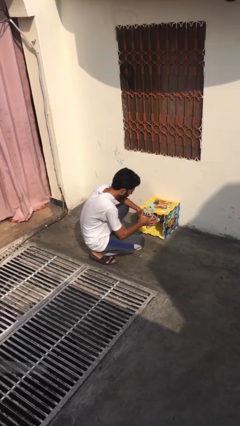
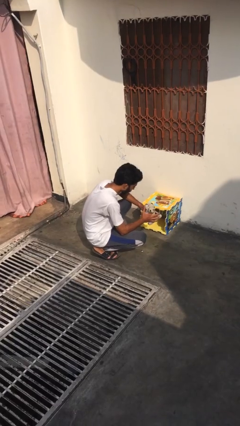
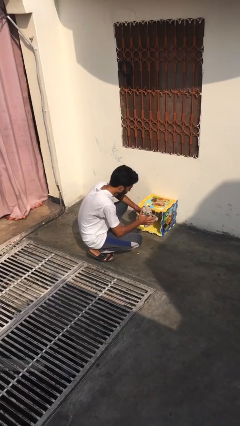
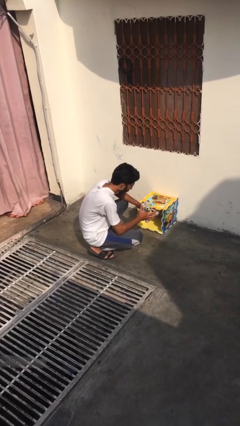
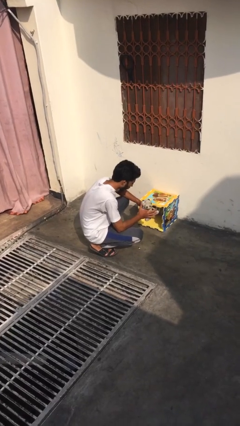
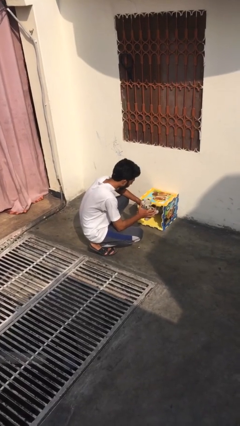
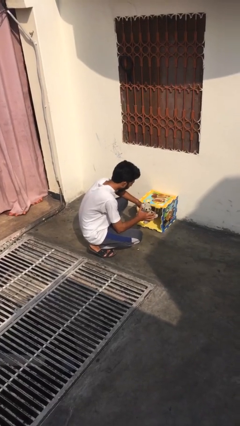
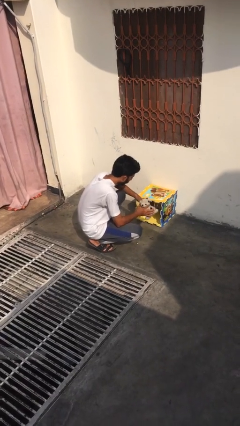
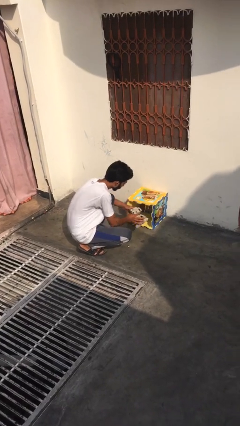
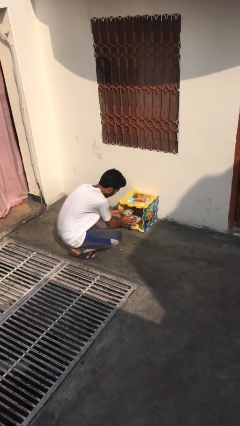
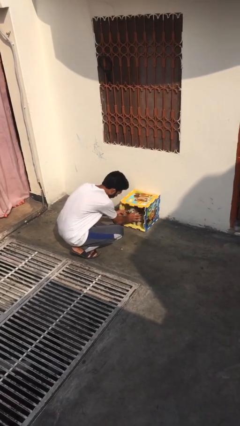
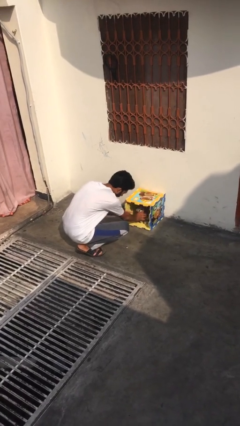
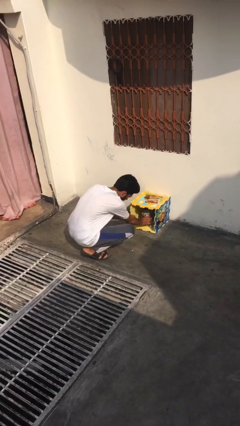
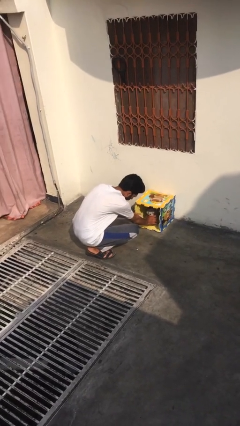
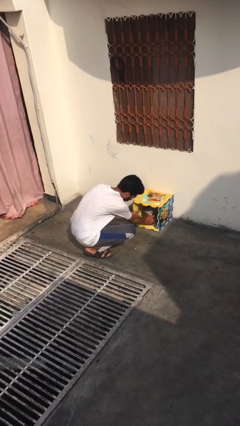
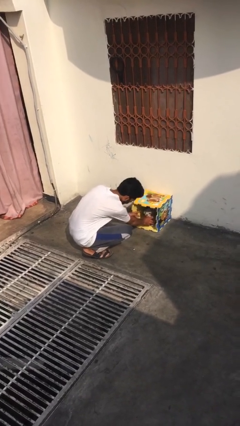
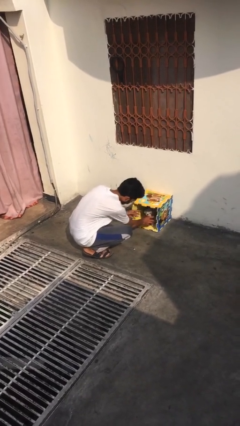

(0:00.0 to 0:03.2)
person crates dog

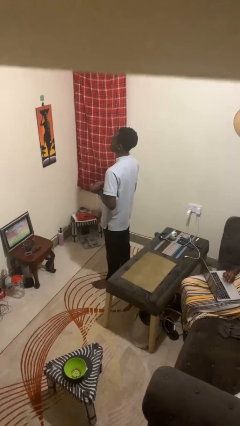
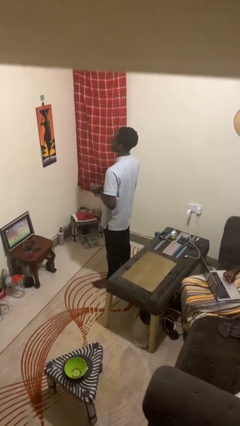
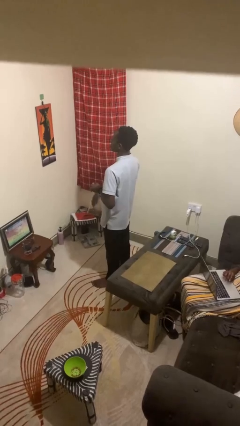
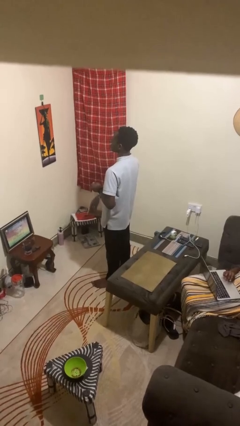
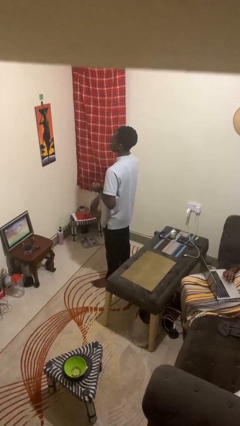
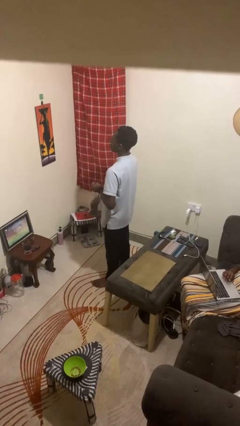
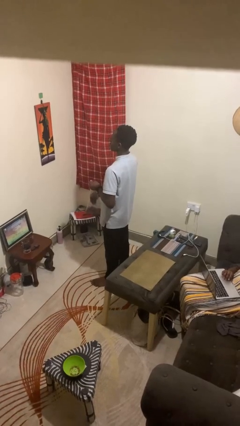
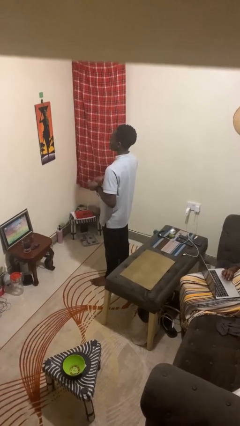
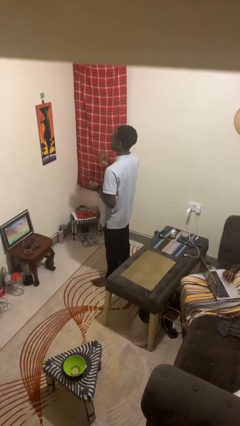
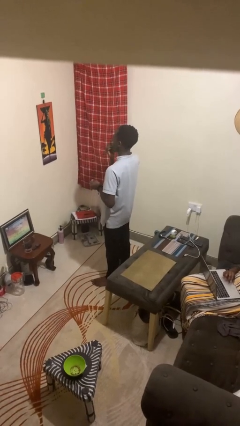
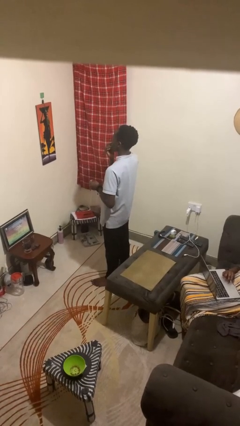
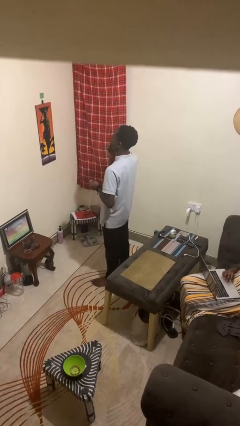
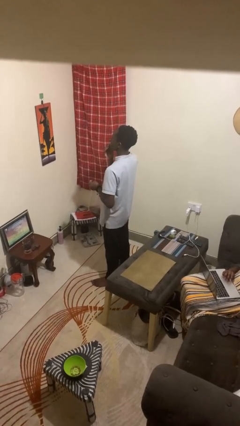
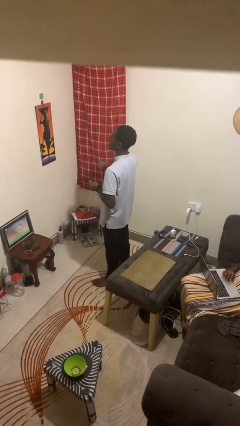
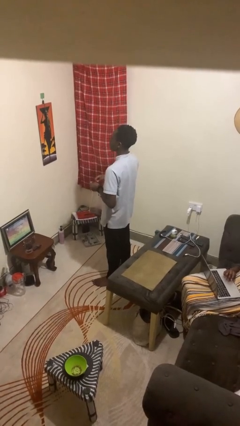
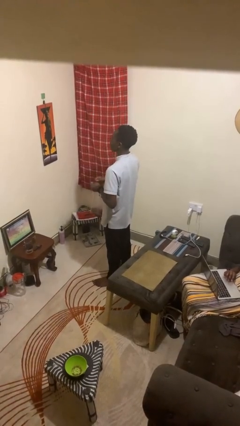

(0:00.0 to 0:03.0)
person eats snack from bag

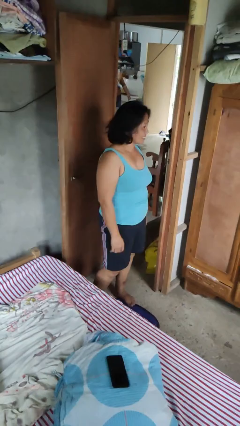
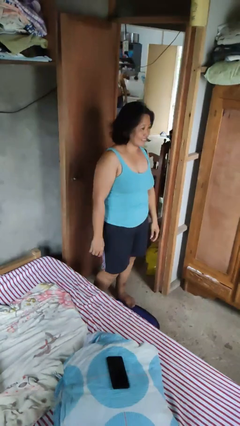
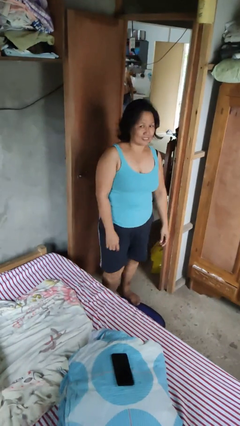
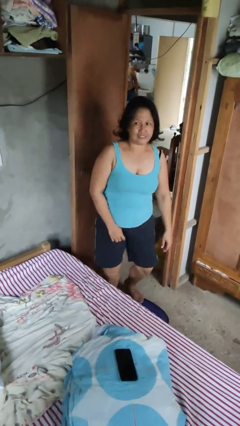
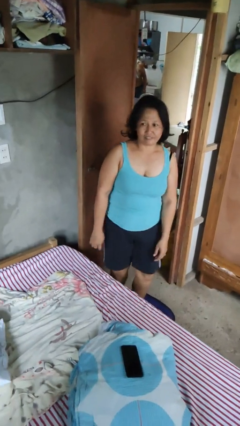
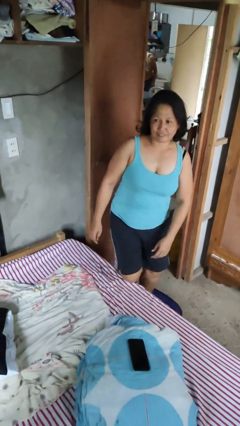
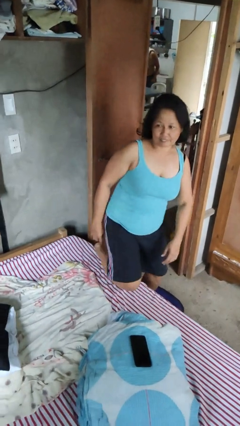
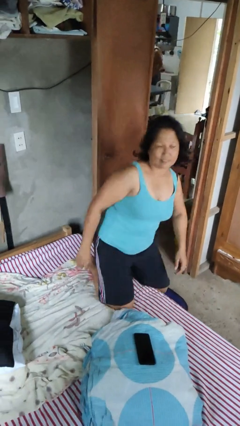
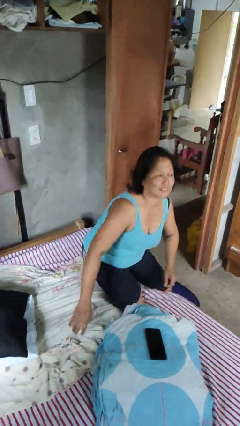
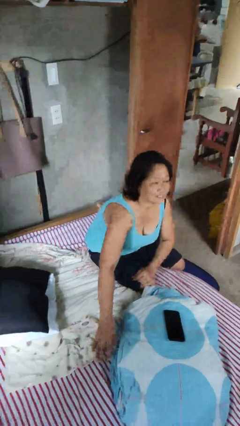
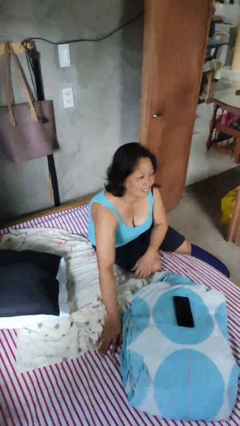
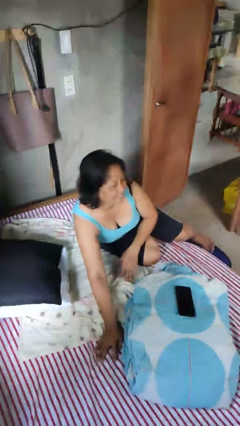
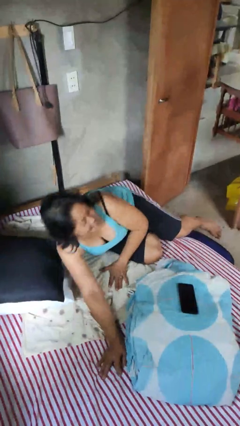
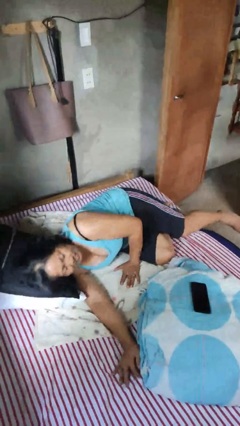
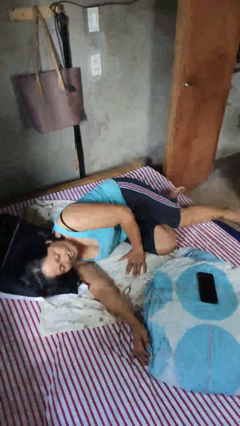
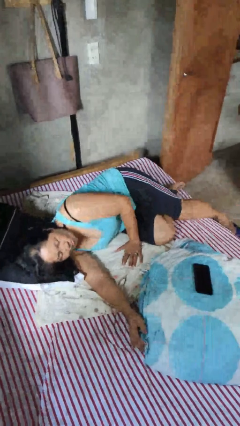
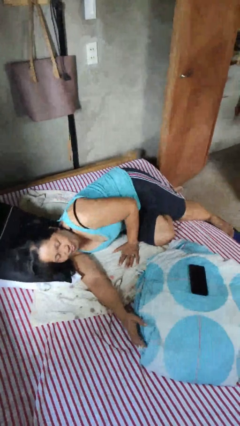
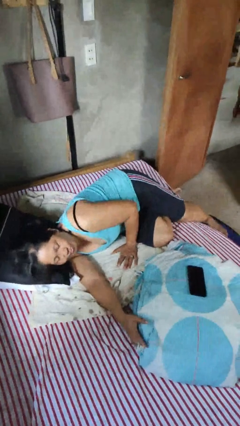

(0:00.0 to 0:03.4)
person lies down on bed

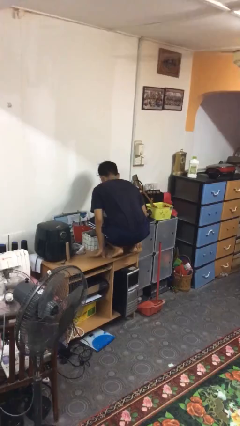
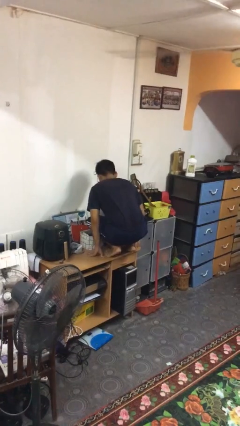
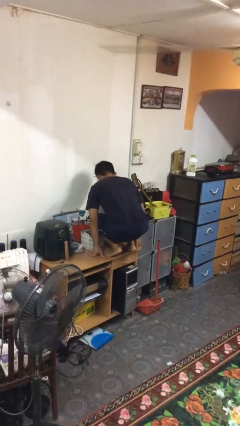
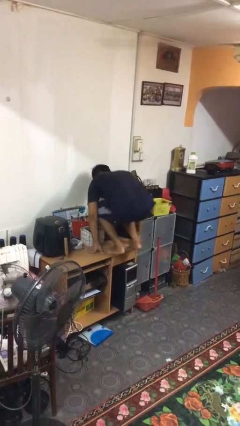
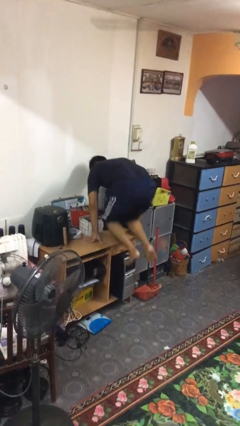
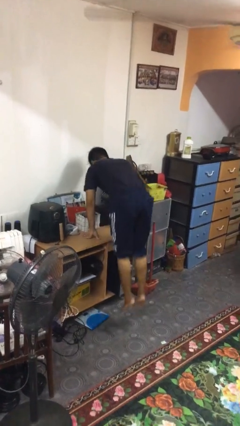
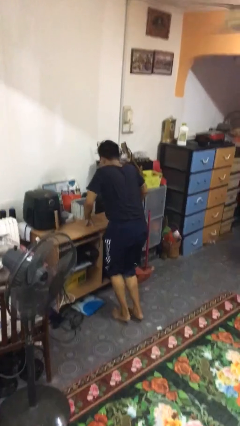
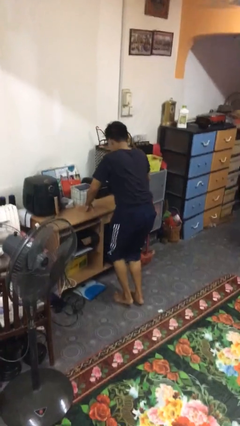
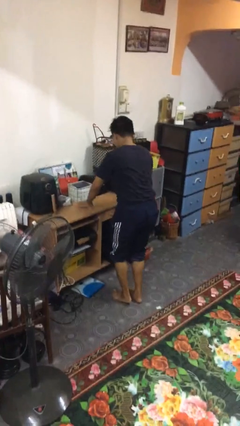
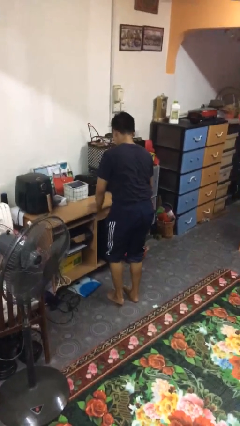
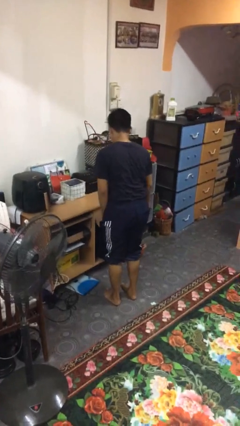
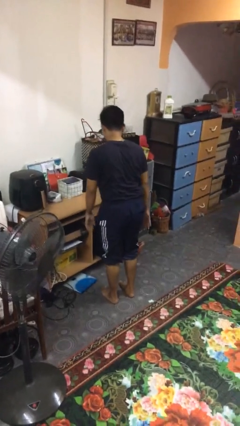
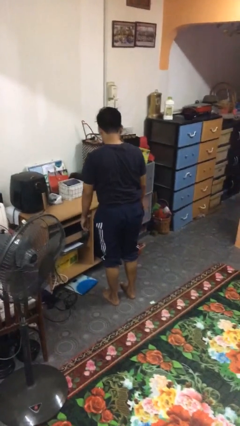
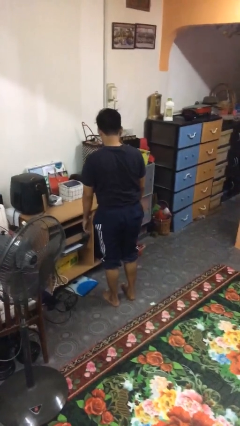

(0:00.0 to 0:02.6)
person climbs off table

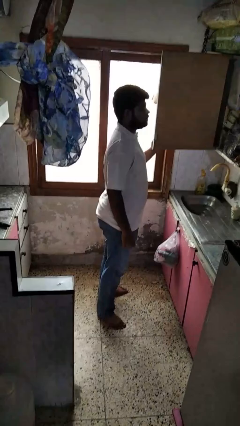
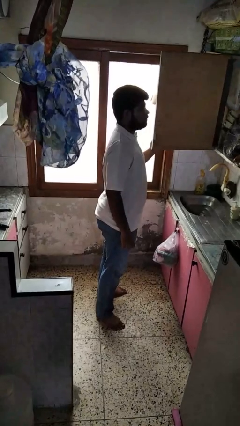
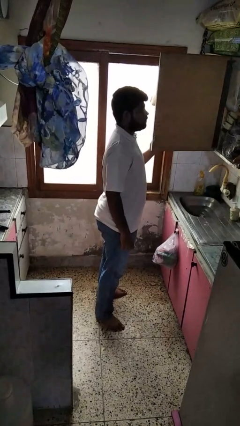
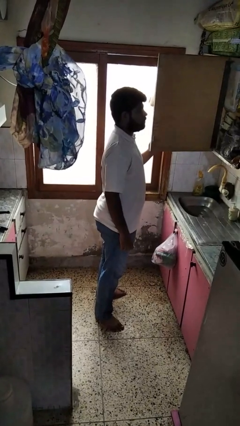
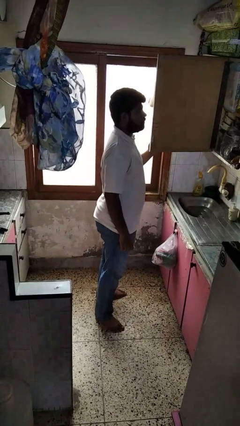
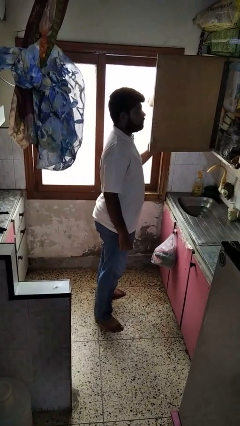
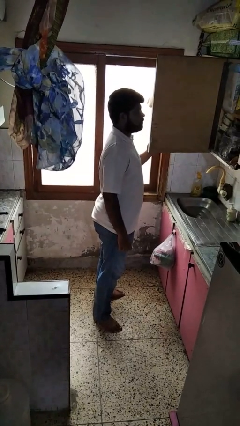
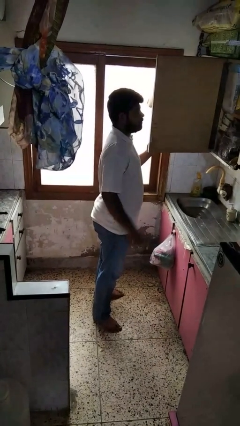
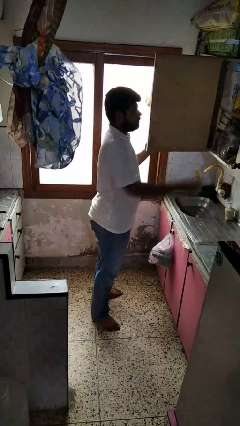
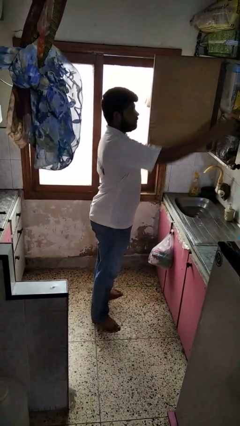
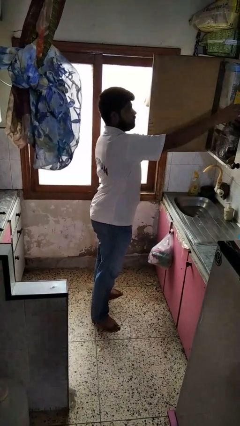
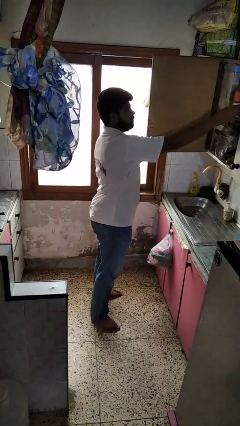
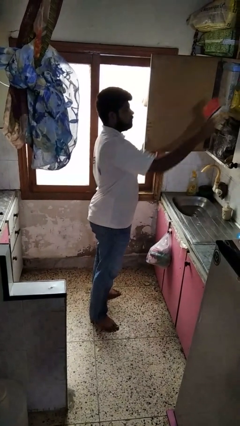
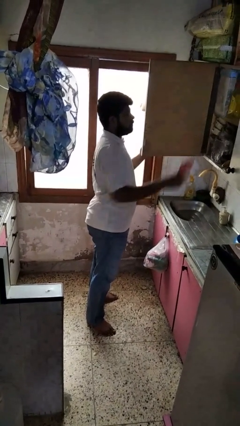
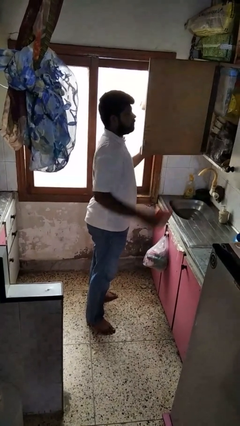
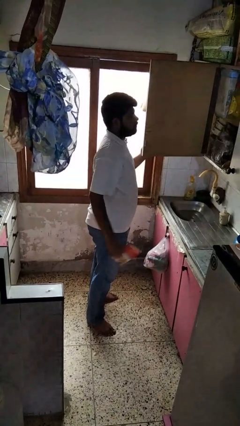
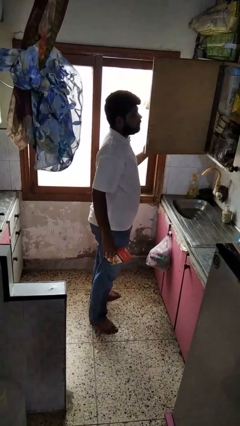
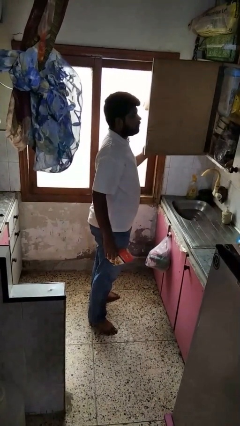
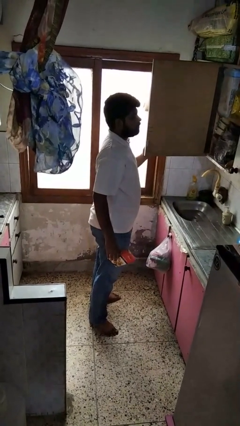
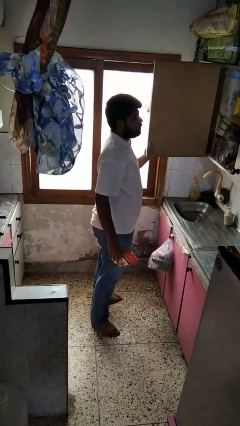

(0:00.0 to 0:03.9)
person picks up object from cabinet

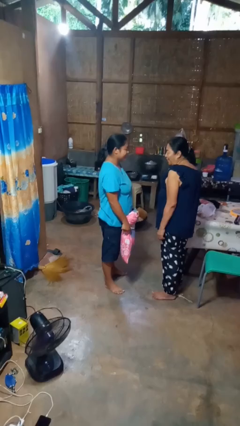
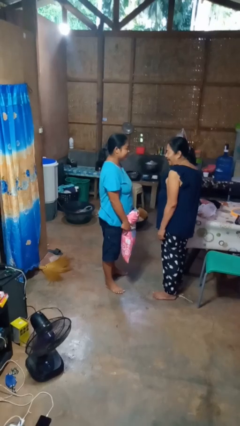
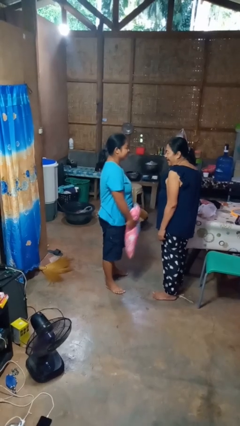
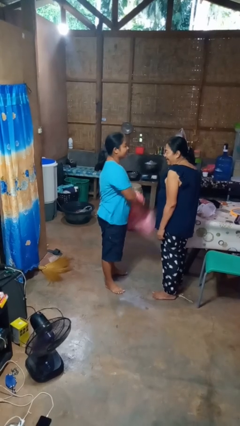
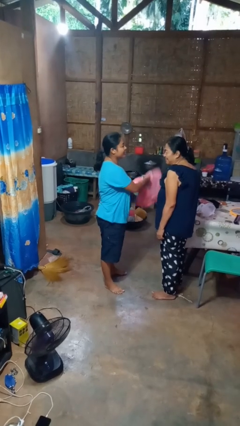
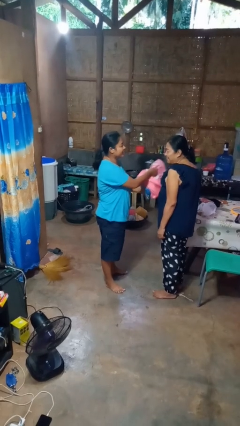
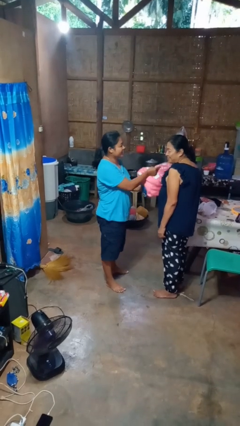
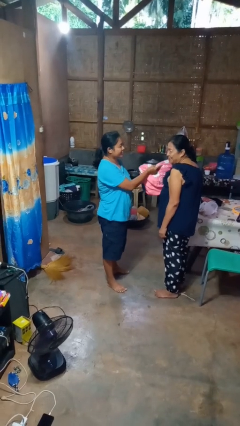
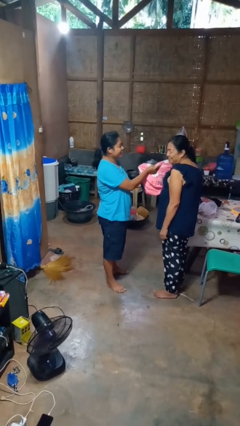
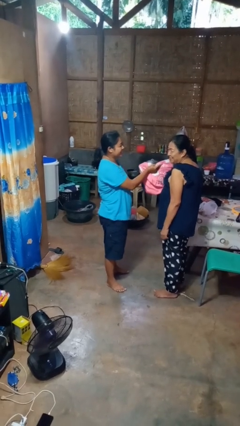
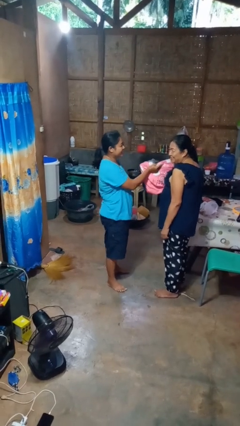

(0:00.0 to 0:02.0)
person hits person with pillow
